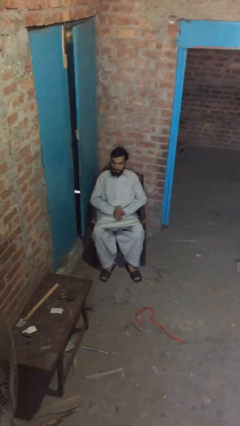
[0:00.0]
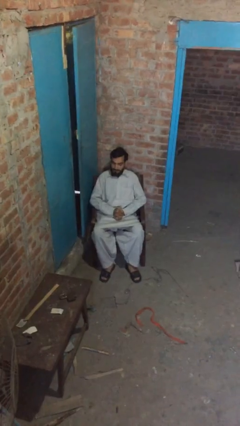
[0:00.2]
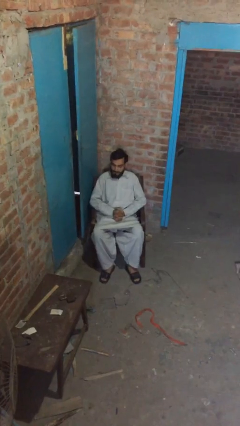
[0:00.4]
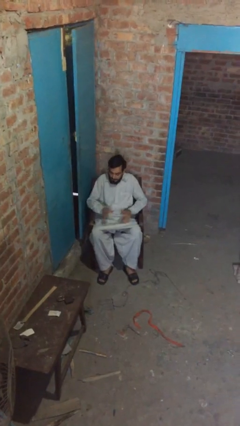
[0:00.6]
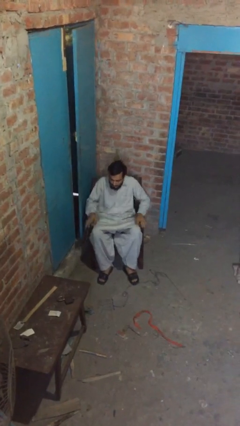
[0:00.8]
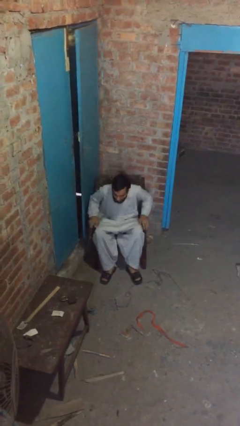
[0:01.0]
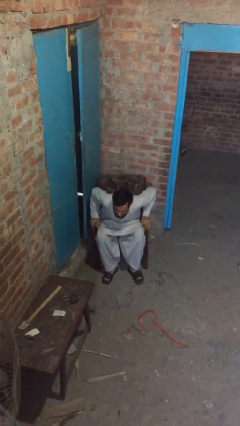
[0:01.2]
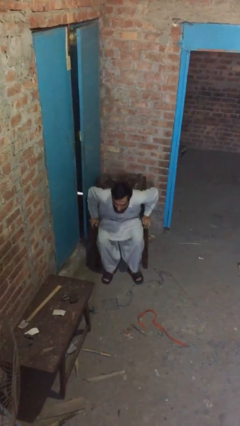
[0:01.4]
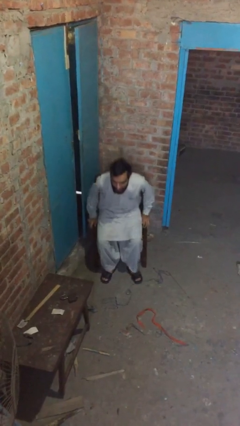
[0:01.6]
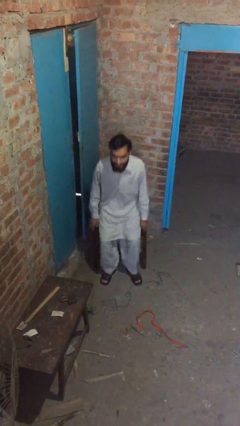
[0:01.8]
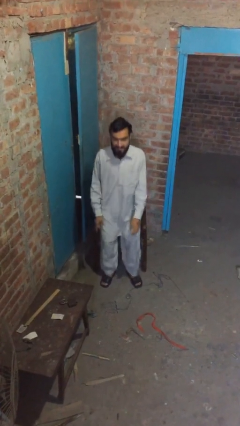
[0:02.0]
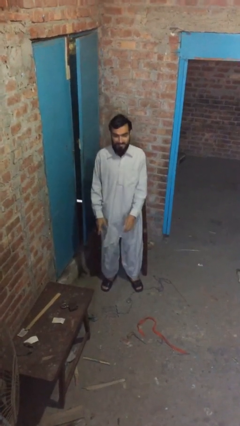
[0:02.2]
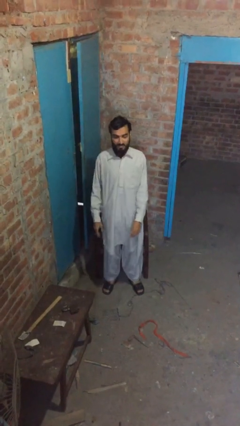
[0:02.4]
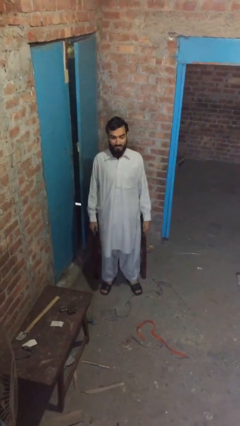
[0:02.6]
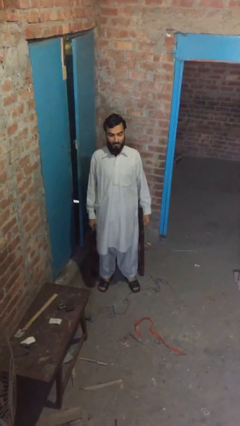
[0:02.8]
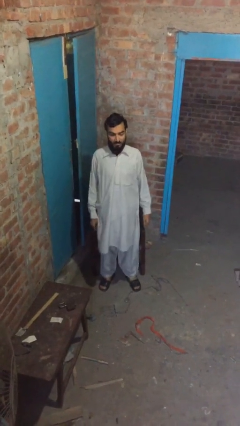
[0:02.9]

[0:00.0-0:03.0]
person stands up

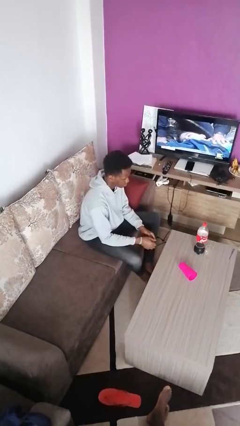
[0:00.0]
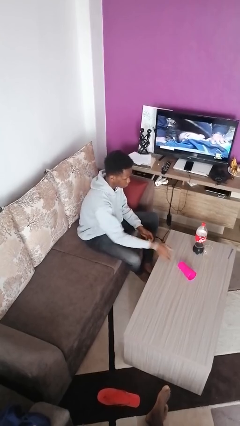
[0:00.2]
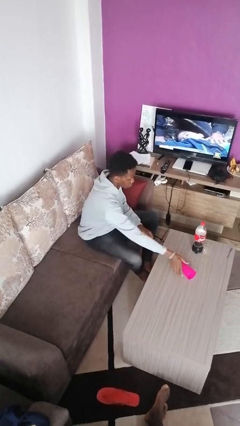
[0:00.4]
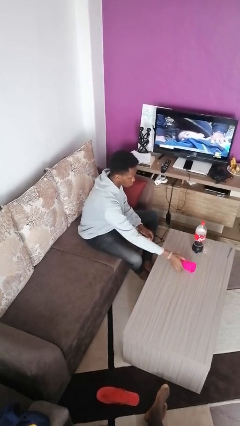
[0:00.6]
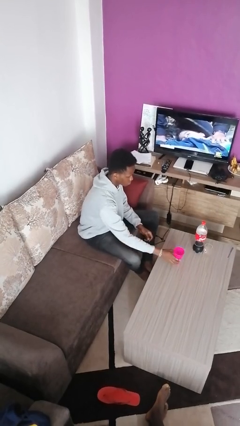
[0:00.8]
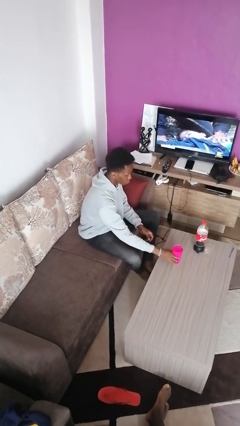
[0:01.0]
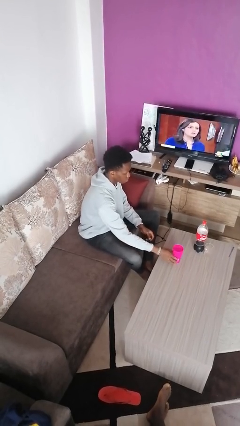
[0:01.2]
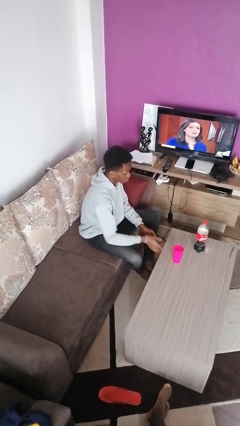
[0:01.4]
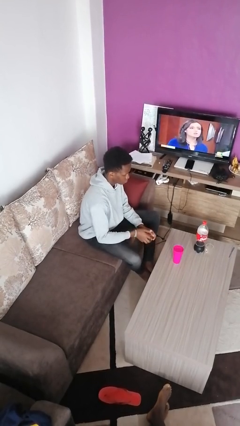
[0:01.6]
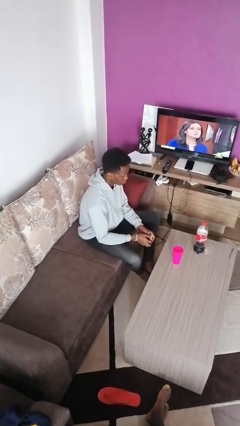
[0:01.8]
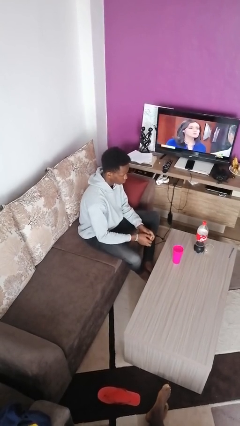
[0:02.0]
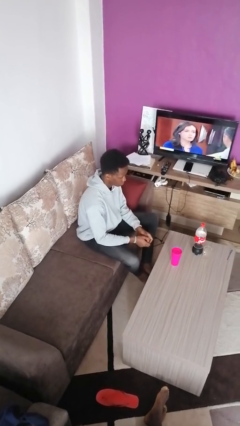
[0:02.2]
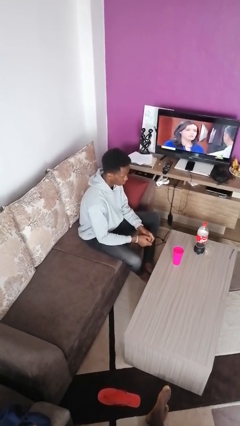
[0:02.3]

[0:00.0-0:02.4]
person sets upright glass

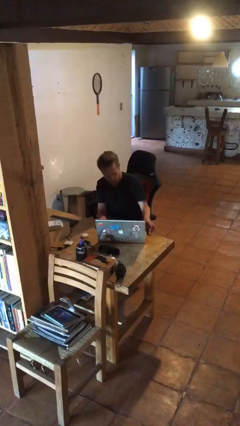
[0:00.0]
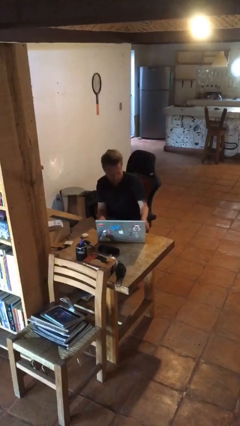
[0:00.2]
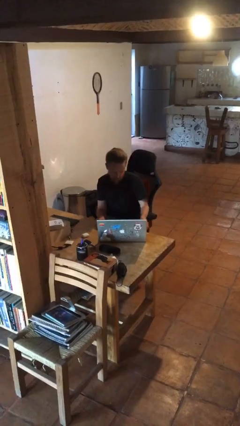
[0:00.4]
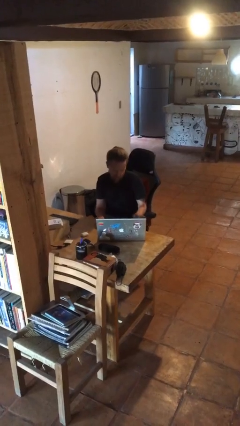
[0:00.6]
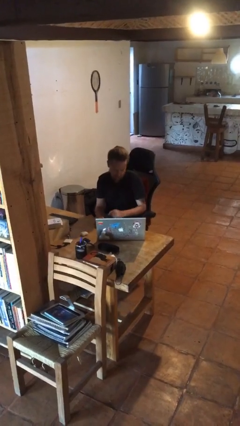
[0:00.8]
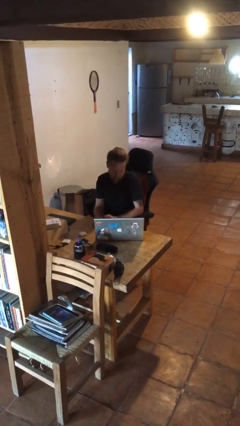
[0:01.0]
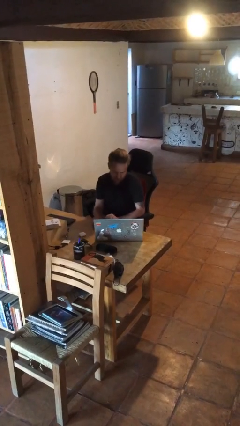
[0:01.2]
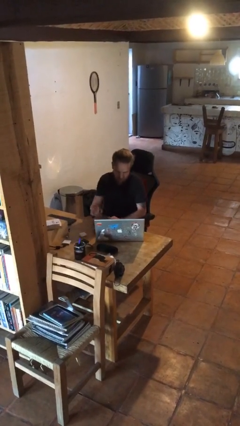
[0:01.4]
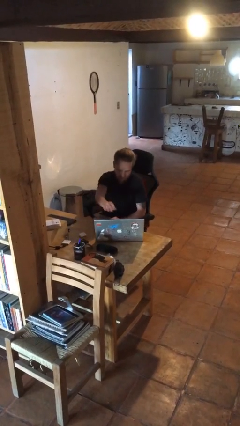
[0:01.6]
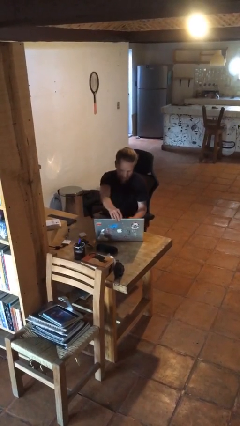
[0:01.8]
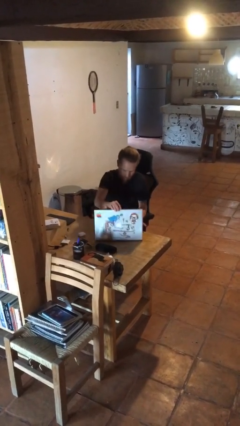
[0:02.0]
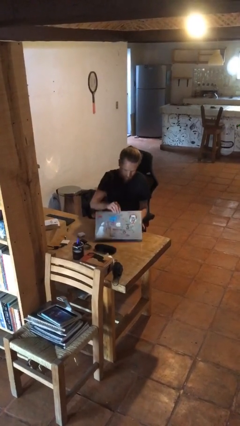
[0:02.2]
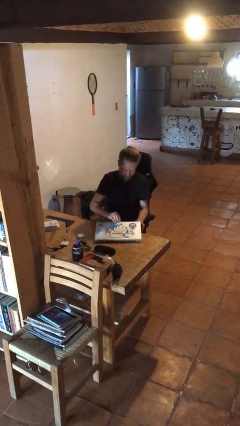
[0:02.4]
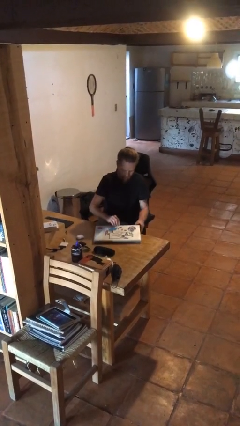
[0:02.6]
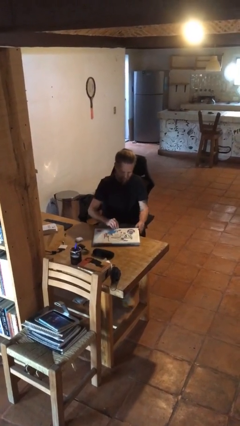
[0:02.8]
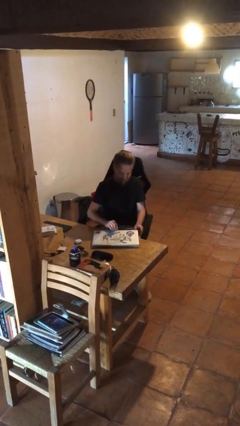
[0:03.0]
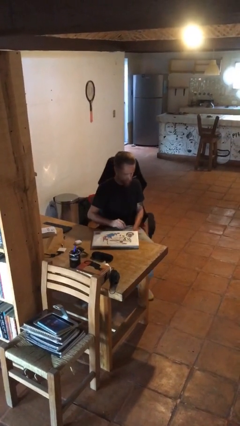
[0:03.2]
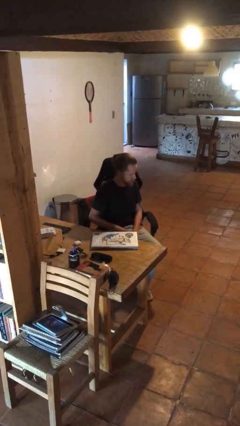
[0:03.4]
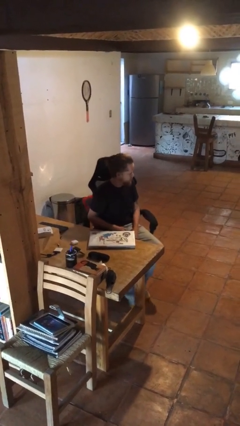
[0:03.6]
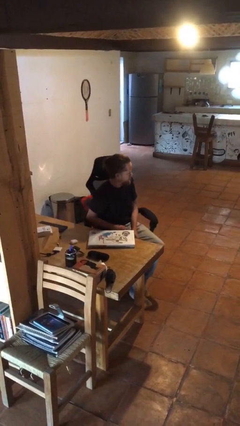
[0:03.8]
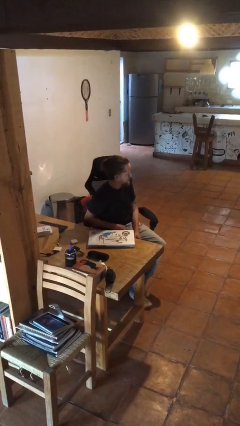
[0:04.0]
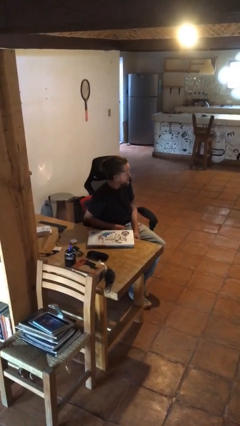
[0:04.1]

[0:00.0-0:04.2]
person closes laptop

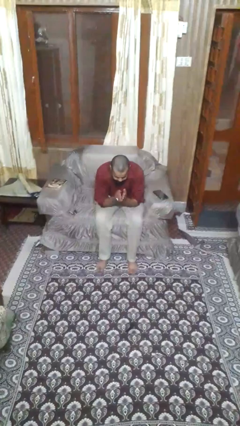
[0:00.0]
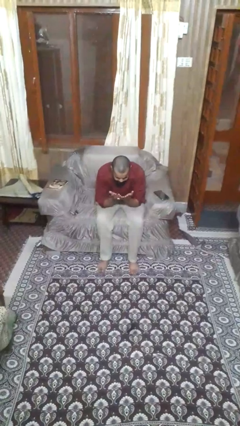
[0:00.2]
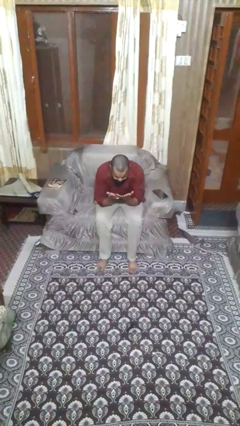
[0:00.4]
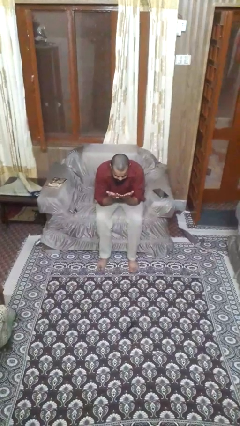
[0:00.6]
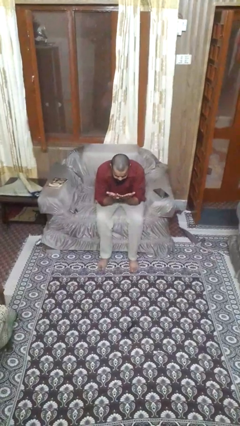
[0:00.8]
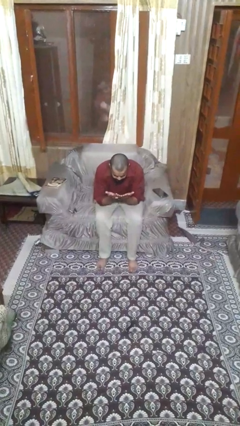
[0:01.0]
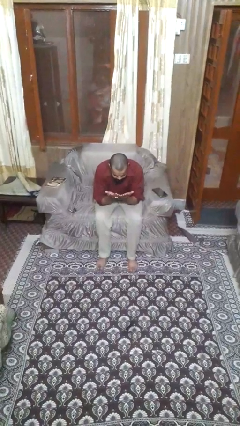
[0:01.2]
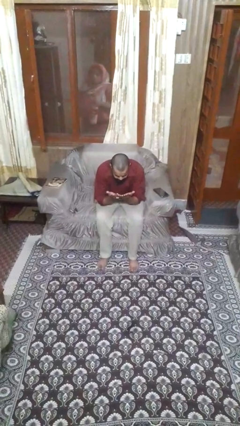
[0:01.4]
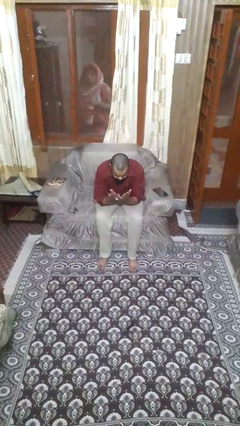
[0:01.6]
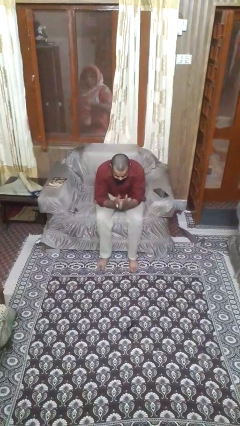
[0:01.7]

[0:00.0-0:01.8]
person looks at hands in lap

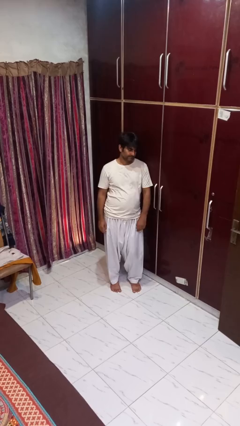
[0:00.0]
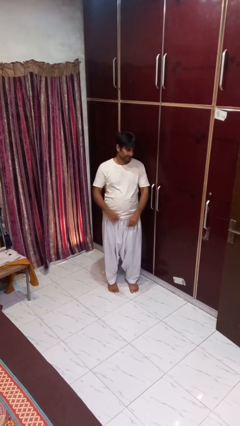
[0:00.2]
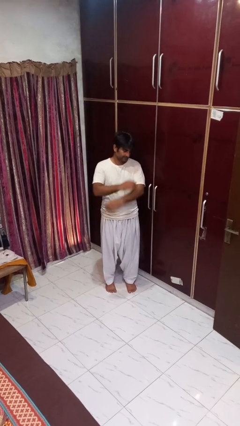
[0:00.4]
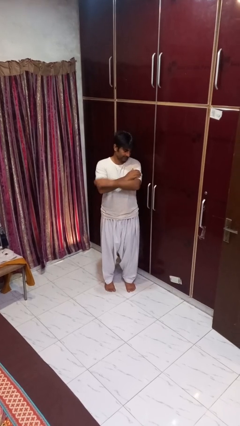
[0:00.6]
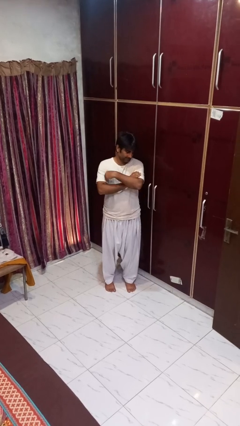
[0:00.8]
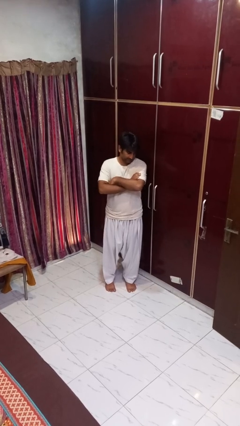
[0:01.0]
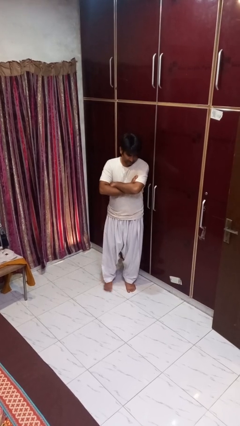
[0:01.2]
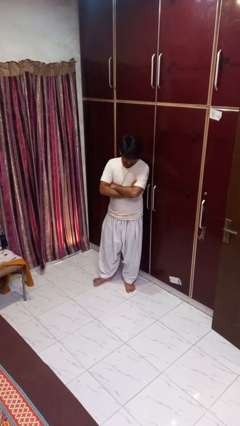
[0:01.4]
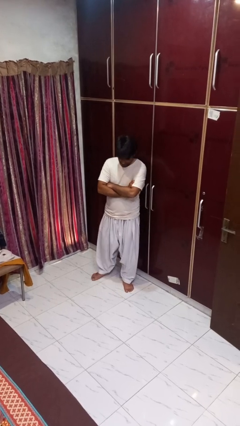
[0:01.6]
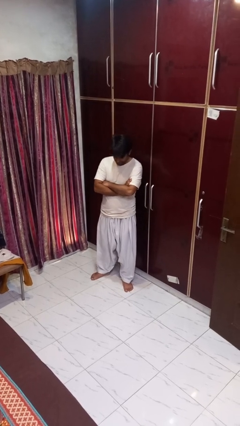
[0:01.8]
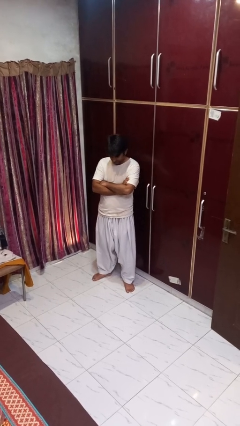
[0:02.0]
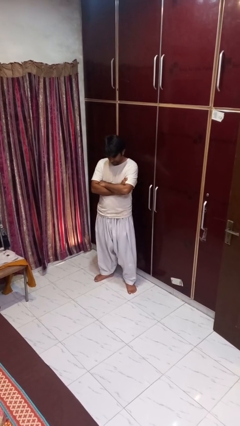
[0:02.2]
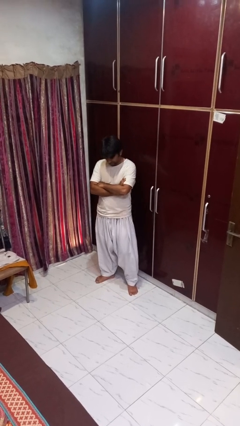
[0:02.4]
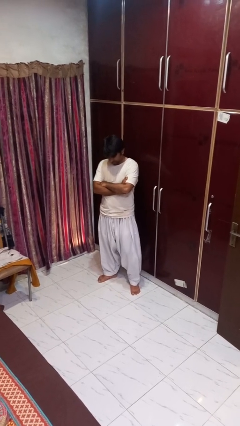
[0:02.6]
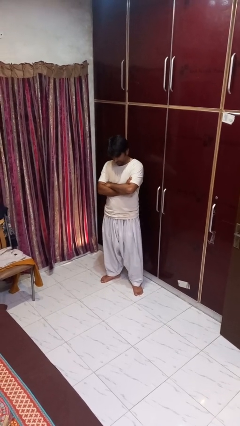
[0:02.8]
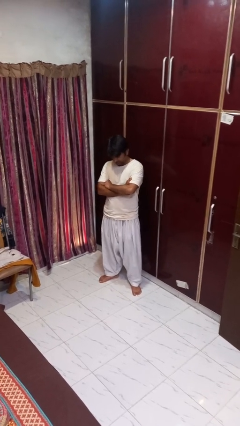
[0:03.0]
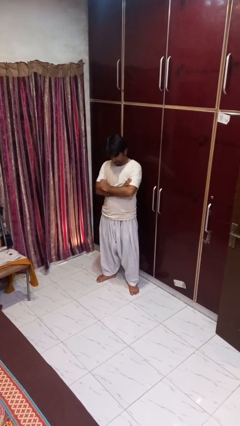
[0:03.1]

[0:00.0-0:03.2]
person crosses arms

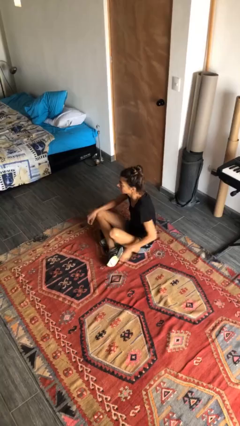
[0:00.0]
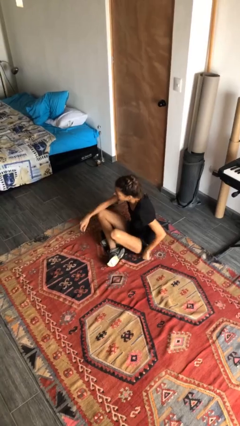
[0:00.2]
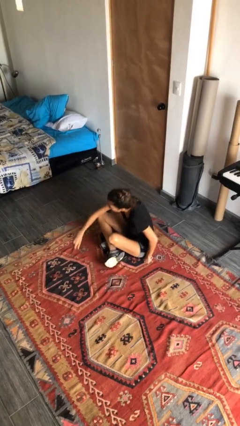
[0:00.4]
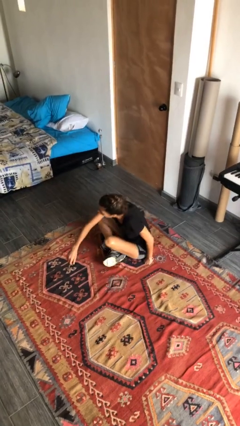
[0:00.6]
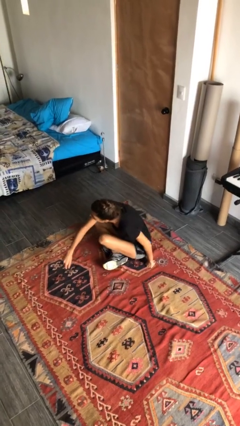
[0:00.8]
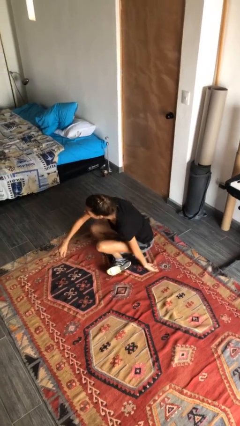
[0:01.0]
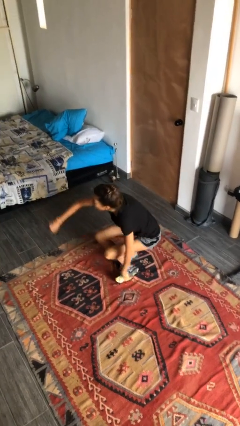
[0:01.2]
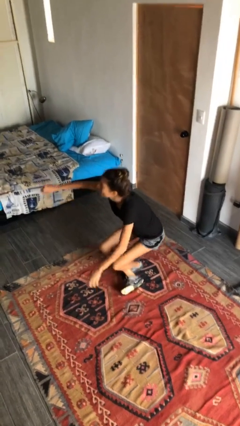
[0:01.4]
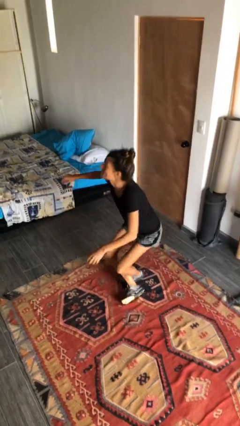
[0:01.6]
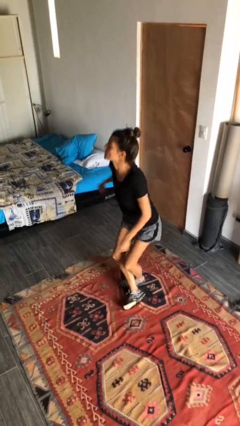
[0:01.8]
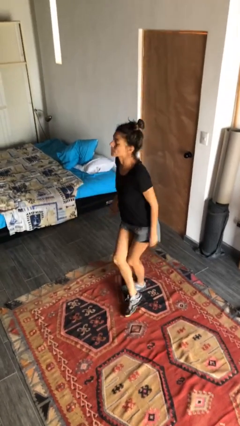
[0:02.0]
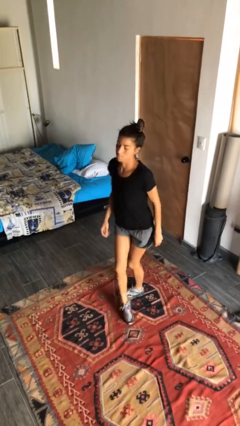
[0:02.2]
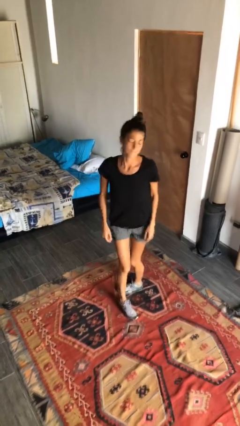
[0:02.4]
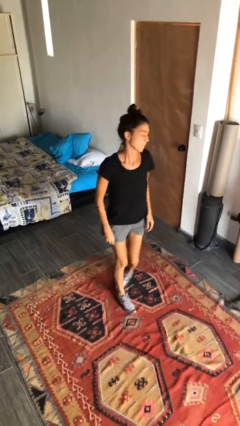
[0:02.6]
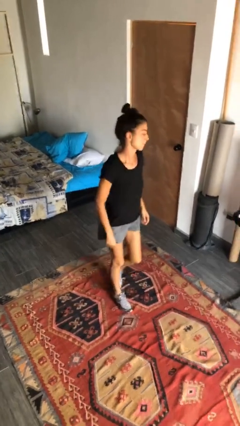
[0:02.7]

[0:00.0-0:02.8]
person stands up from floor
